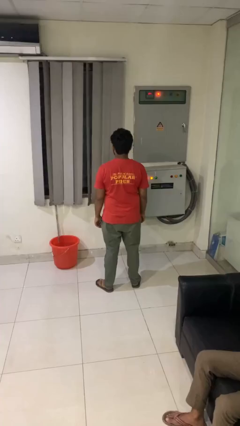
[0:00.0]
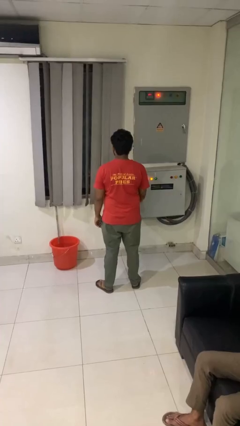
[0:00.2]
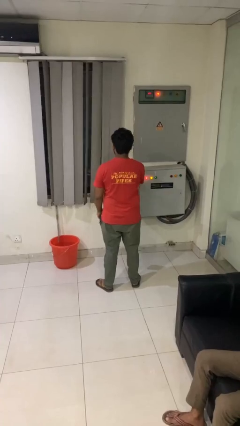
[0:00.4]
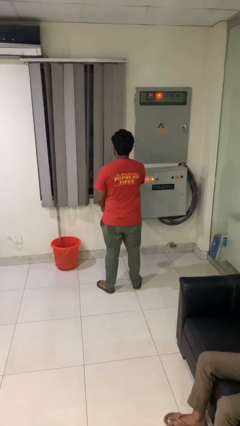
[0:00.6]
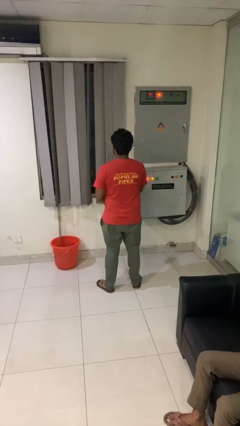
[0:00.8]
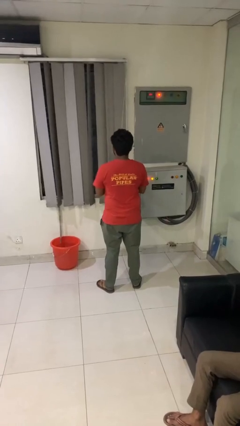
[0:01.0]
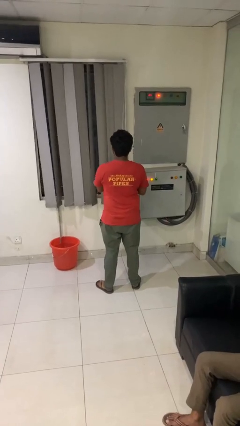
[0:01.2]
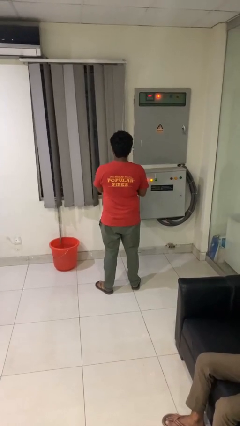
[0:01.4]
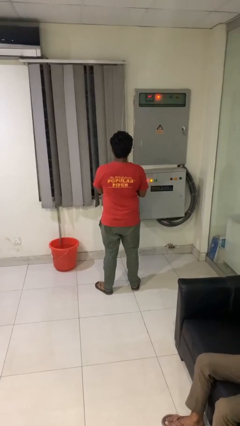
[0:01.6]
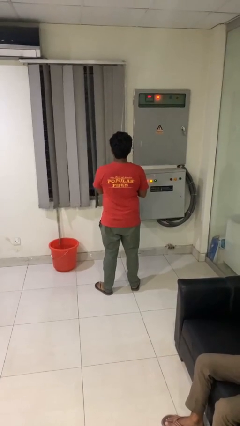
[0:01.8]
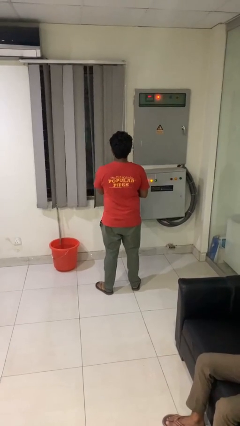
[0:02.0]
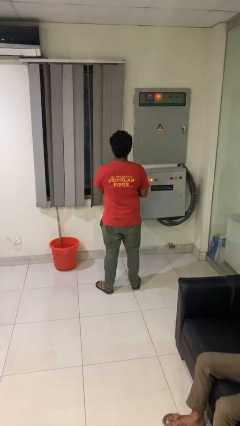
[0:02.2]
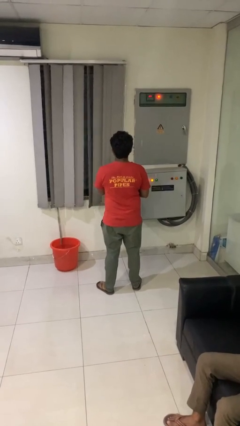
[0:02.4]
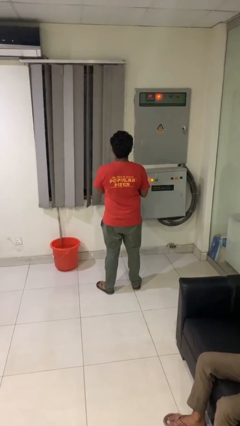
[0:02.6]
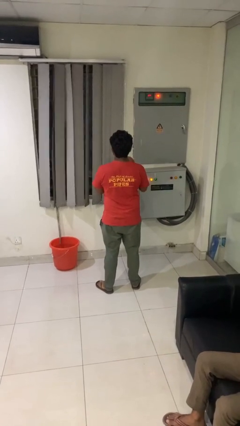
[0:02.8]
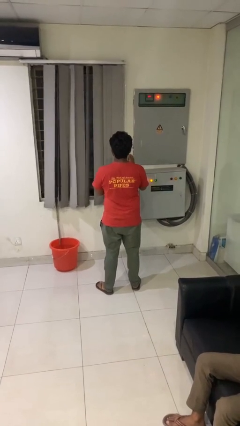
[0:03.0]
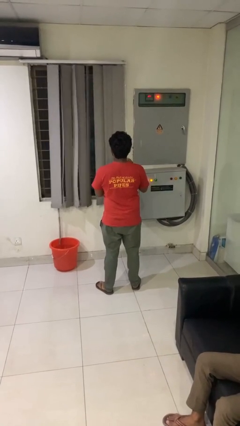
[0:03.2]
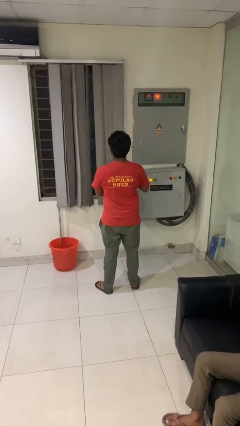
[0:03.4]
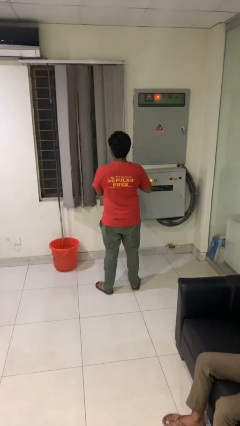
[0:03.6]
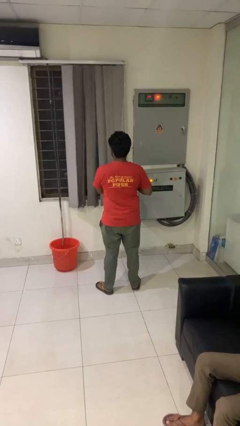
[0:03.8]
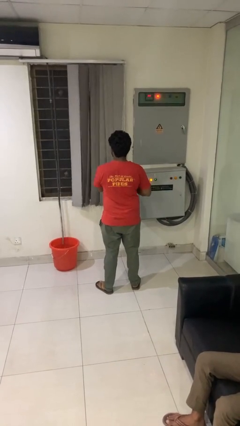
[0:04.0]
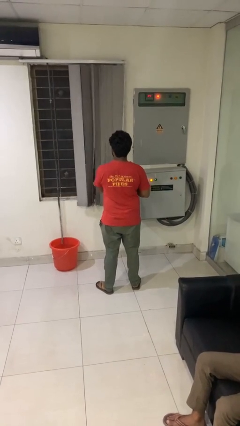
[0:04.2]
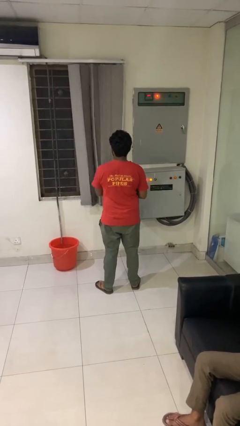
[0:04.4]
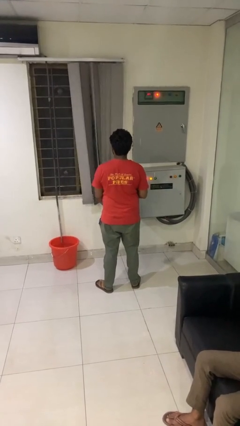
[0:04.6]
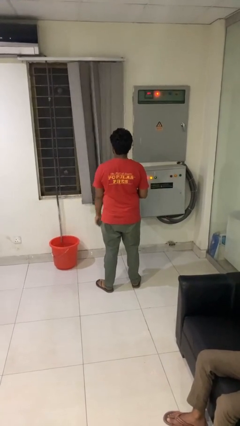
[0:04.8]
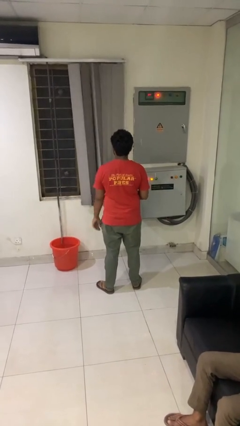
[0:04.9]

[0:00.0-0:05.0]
person opens curtains

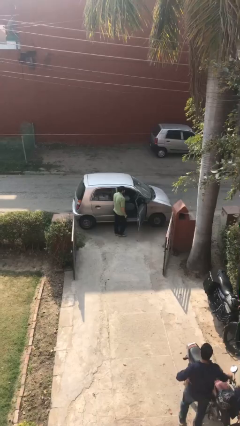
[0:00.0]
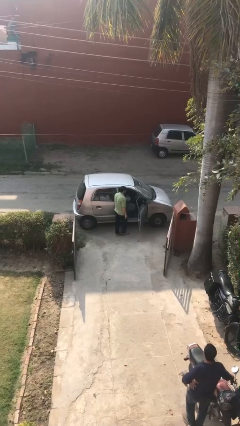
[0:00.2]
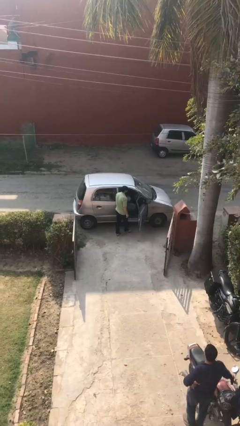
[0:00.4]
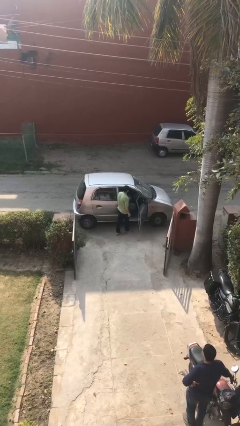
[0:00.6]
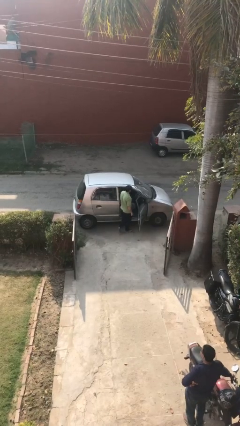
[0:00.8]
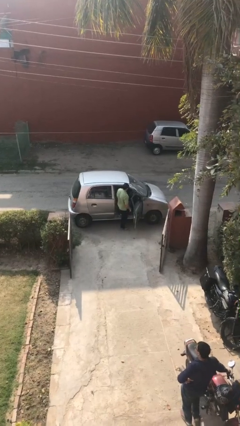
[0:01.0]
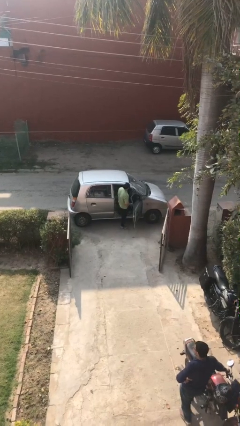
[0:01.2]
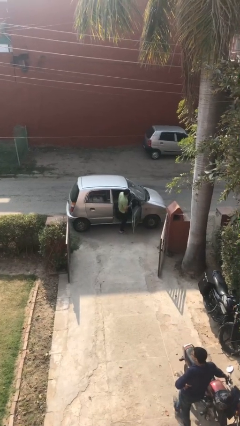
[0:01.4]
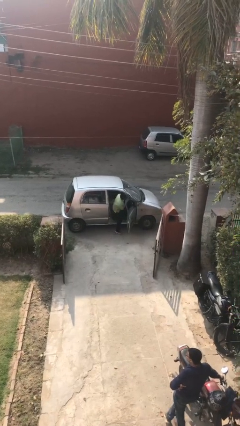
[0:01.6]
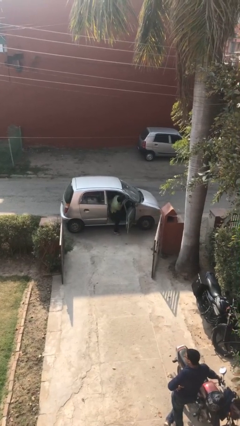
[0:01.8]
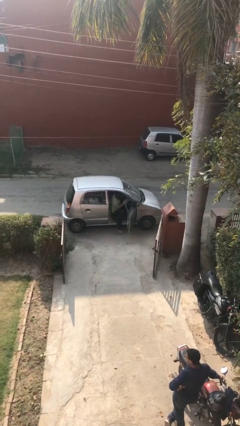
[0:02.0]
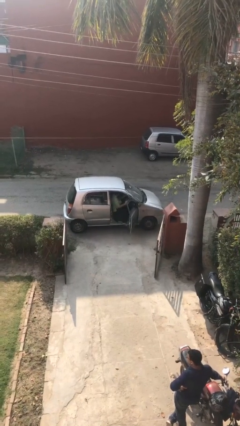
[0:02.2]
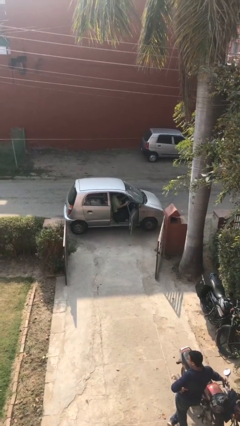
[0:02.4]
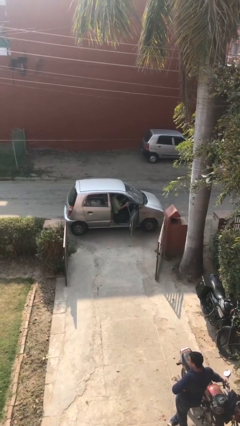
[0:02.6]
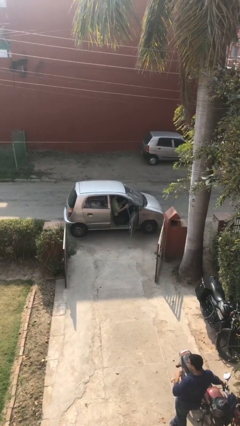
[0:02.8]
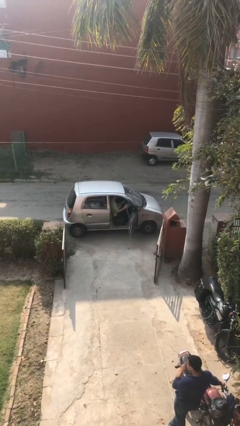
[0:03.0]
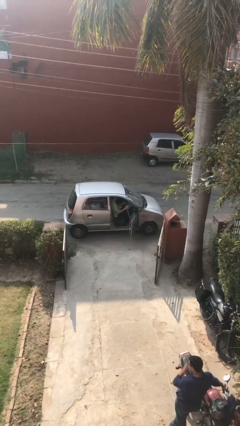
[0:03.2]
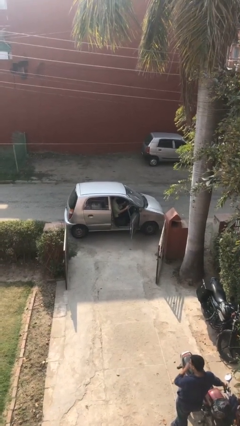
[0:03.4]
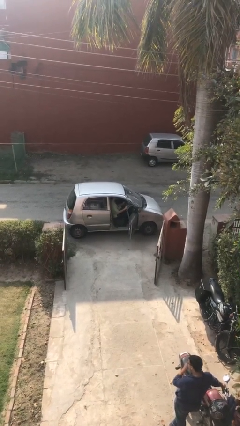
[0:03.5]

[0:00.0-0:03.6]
person enters car

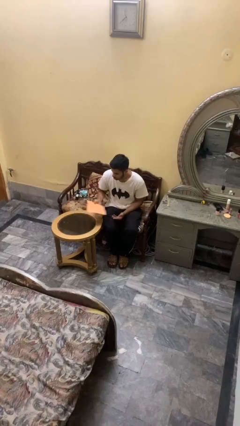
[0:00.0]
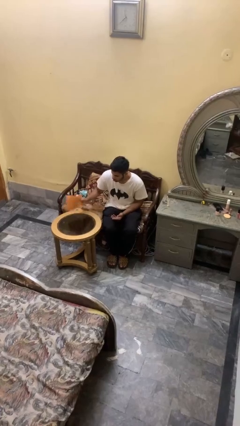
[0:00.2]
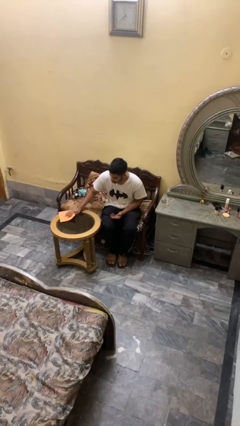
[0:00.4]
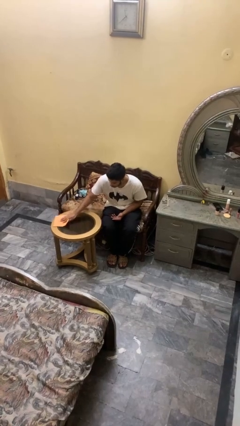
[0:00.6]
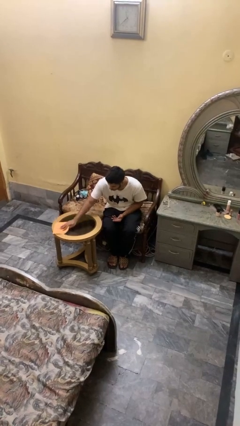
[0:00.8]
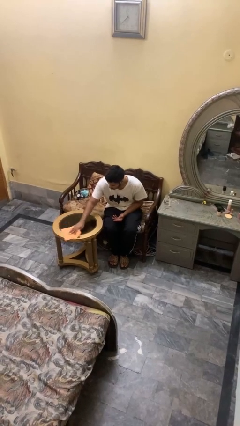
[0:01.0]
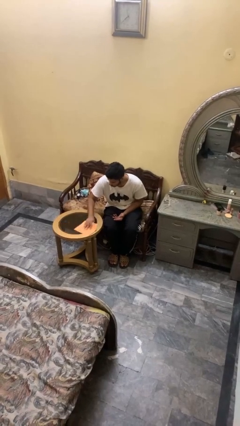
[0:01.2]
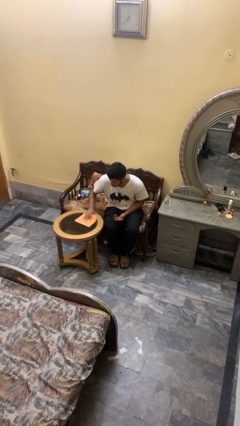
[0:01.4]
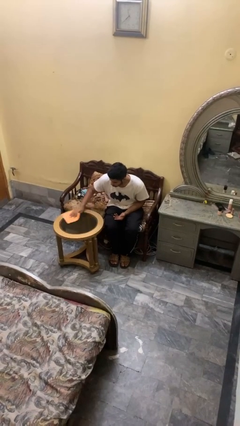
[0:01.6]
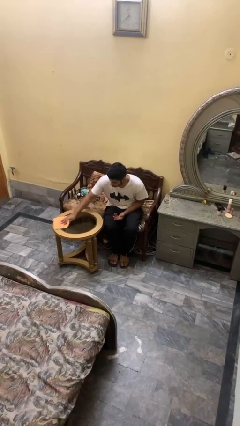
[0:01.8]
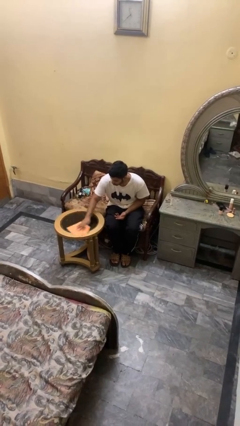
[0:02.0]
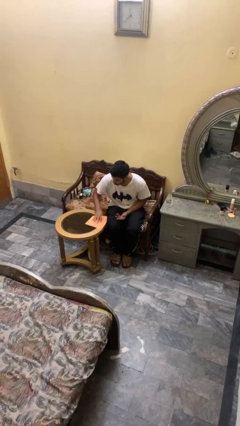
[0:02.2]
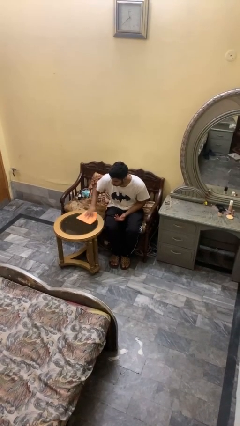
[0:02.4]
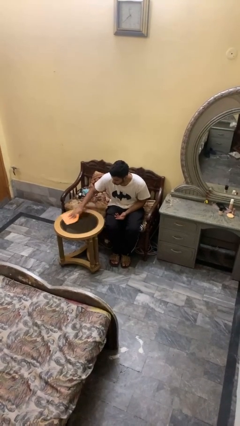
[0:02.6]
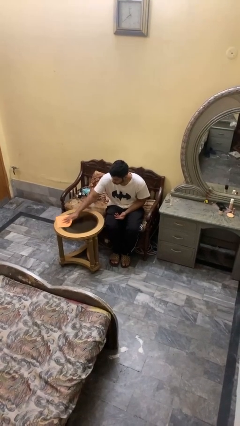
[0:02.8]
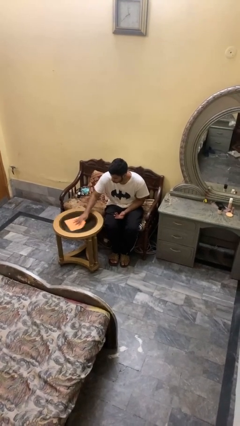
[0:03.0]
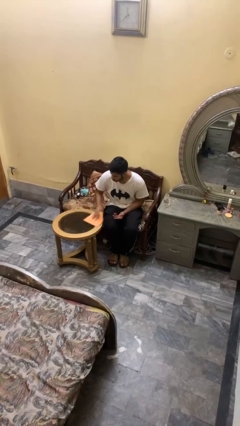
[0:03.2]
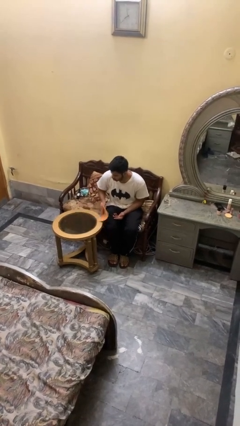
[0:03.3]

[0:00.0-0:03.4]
person cleans table with rag

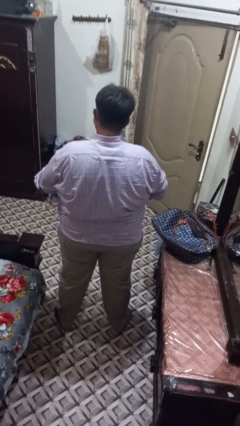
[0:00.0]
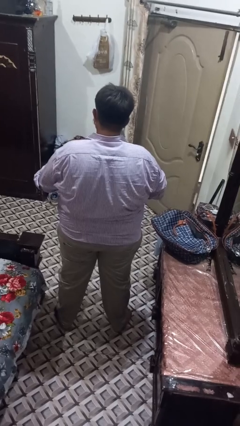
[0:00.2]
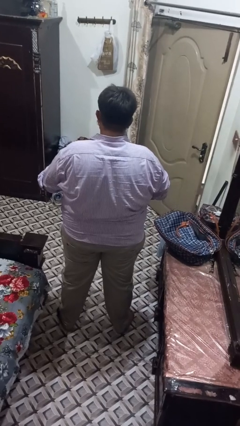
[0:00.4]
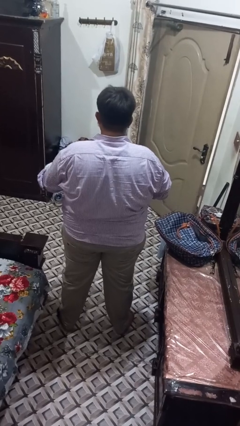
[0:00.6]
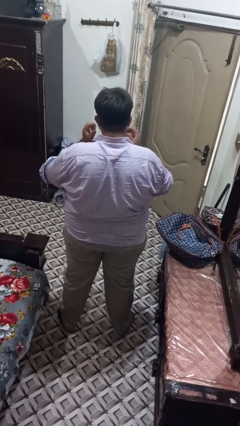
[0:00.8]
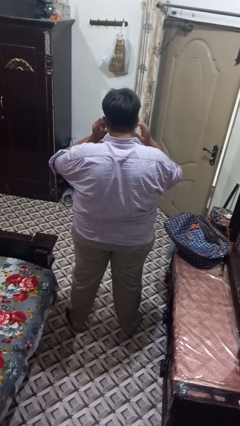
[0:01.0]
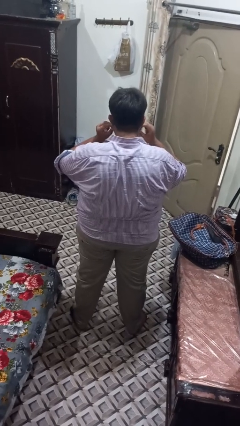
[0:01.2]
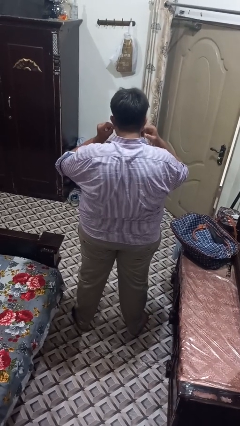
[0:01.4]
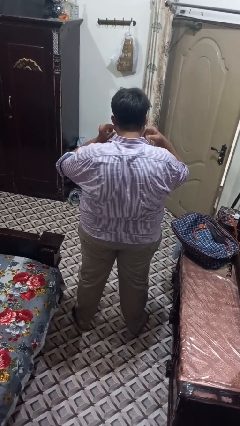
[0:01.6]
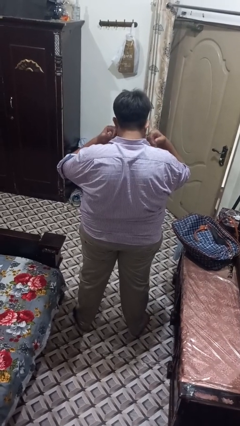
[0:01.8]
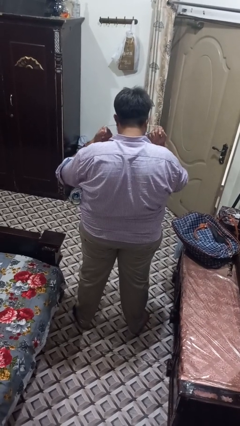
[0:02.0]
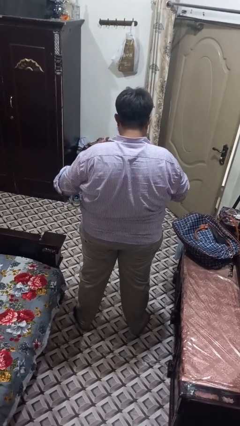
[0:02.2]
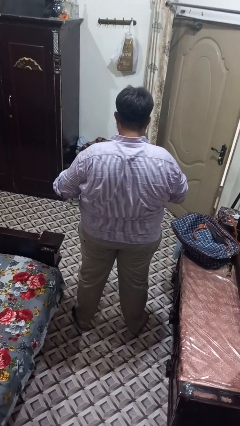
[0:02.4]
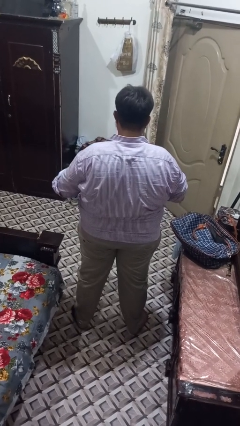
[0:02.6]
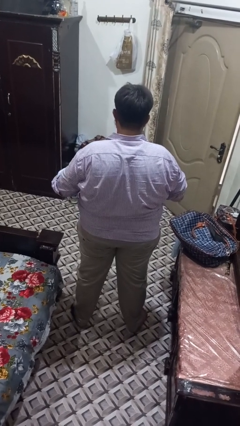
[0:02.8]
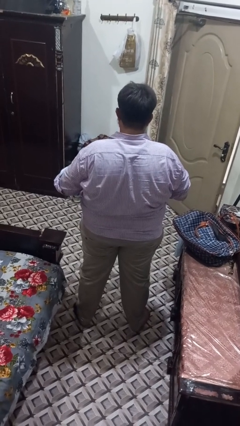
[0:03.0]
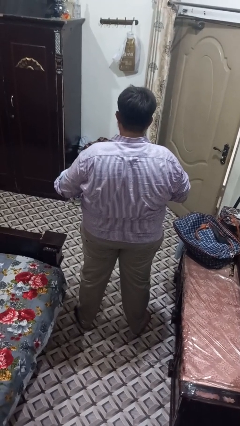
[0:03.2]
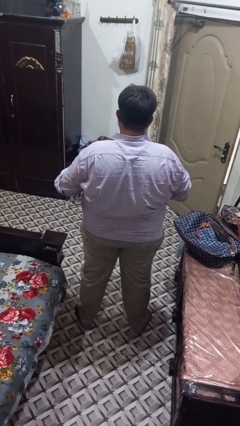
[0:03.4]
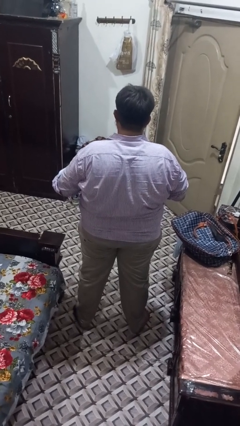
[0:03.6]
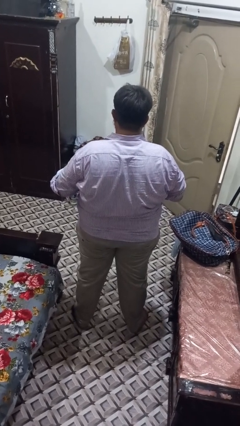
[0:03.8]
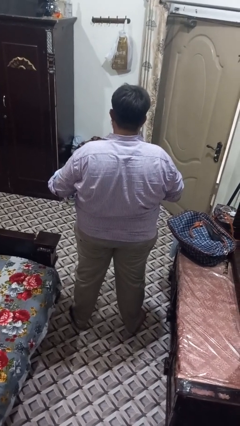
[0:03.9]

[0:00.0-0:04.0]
person takes off facemask

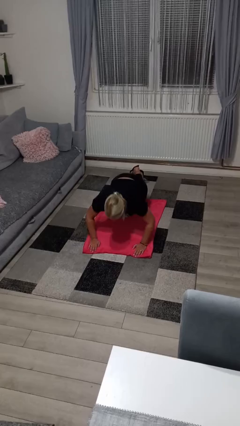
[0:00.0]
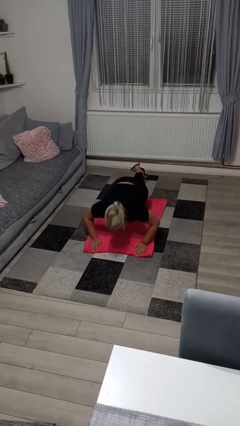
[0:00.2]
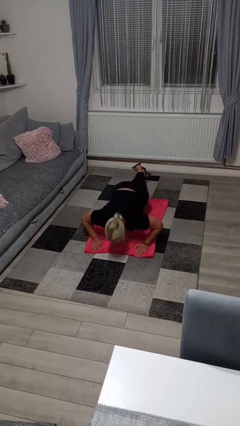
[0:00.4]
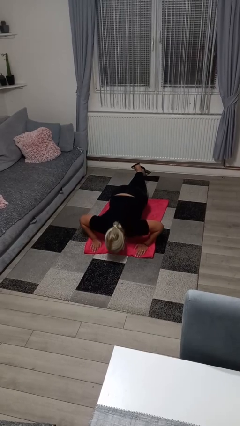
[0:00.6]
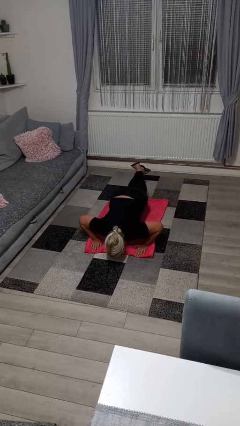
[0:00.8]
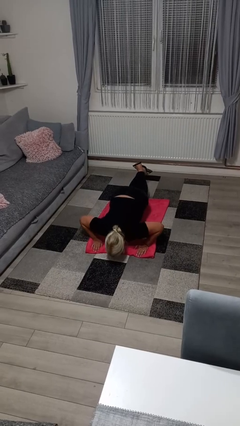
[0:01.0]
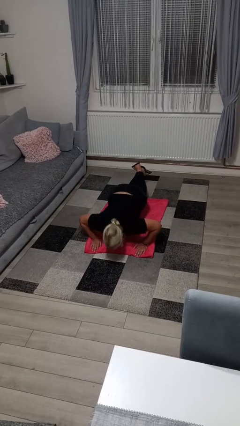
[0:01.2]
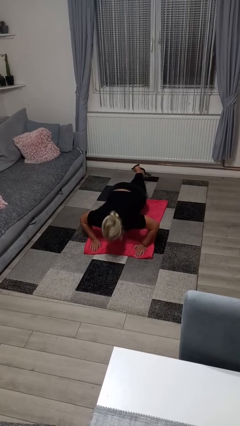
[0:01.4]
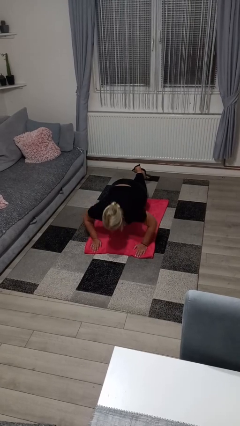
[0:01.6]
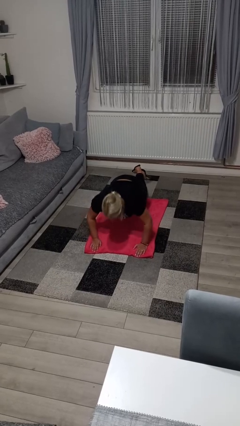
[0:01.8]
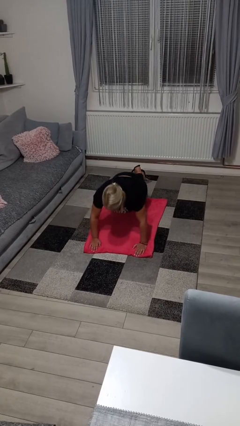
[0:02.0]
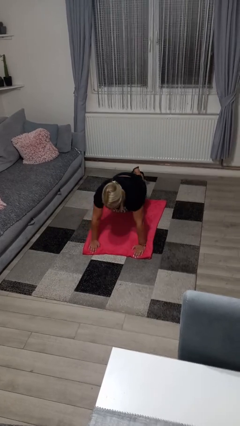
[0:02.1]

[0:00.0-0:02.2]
person exercises with pushup
